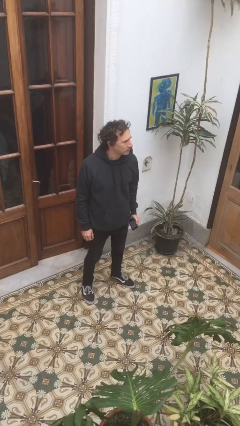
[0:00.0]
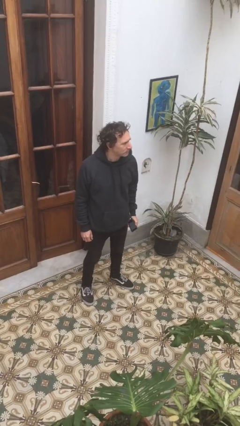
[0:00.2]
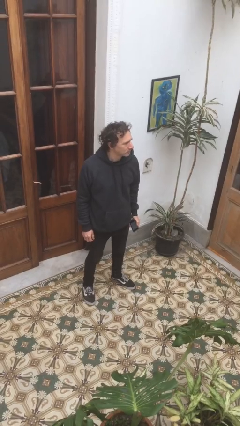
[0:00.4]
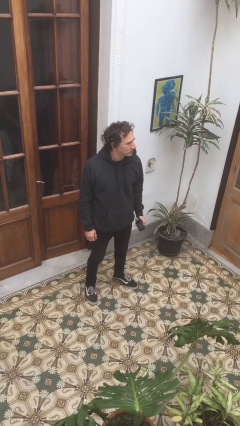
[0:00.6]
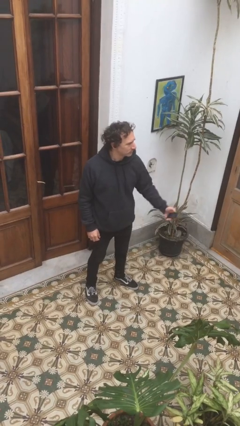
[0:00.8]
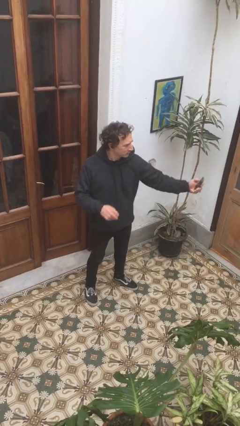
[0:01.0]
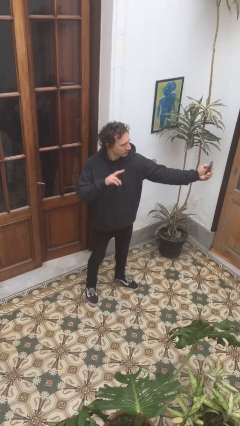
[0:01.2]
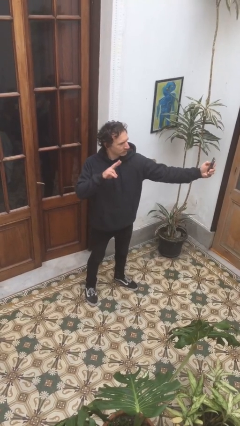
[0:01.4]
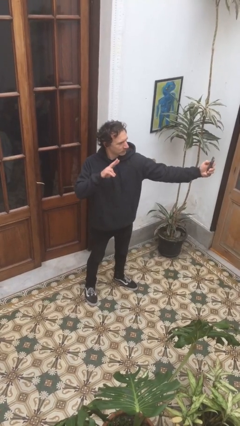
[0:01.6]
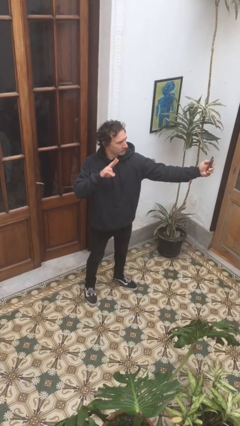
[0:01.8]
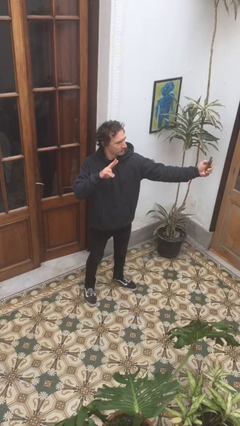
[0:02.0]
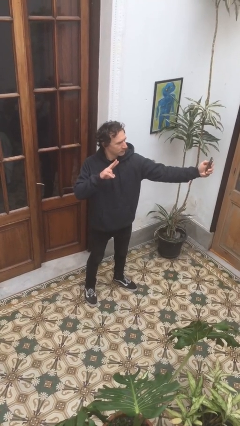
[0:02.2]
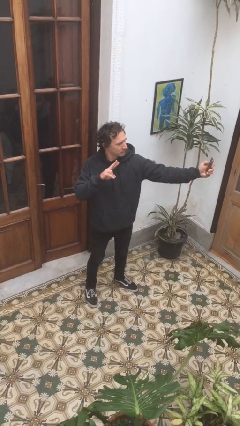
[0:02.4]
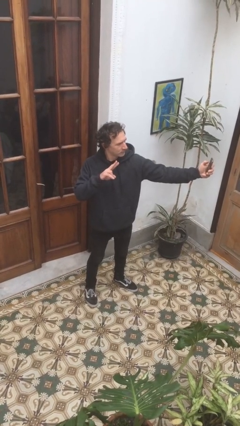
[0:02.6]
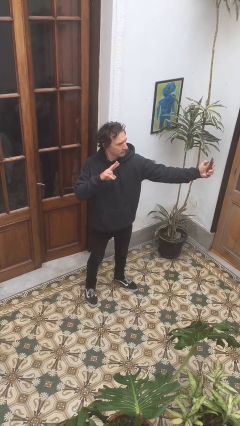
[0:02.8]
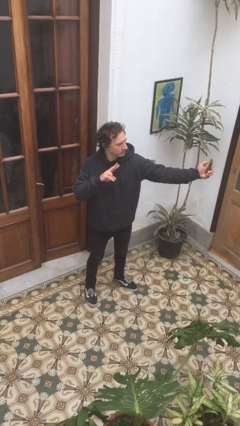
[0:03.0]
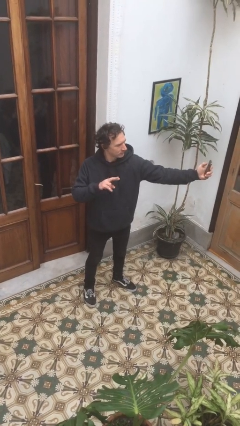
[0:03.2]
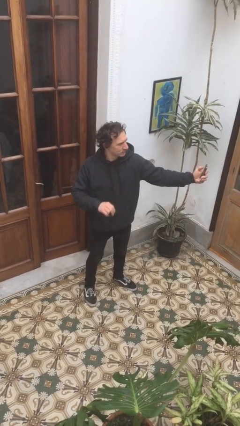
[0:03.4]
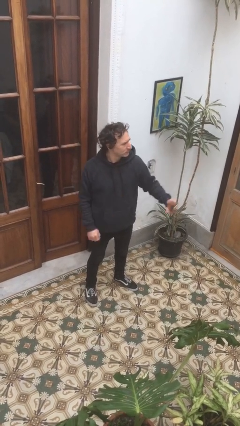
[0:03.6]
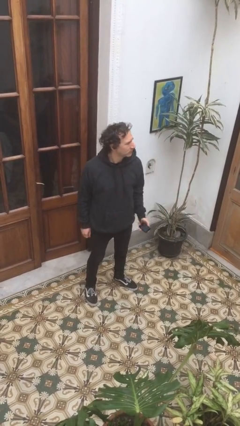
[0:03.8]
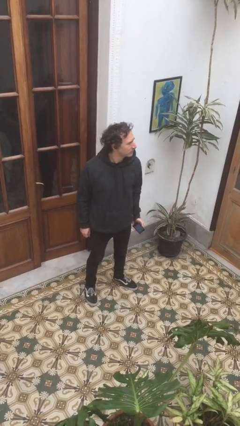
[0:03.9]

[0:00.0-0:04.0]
person takes selfie

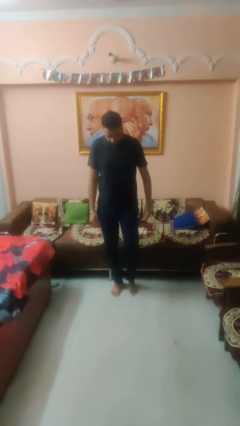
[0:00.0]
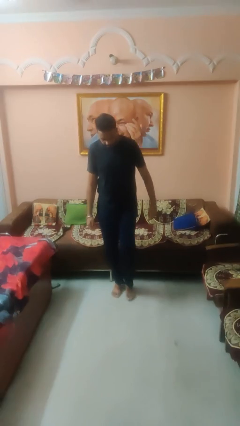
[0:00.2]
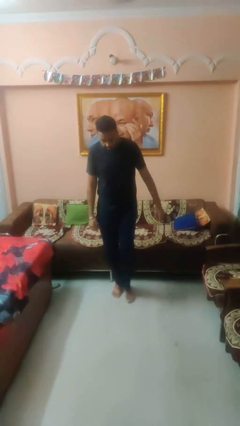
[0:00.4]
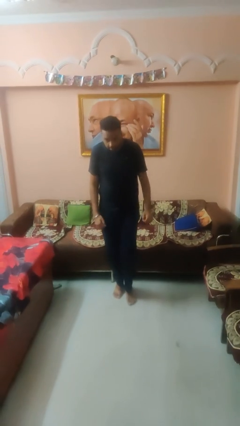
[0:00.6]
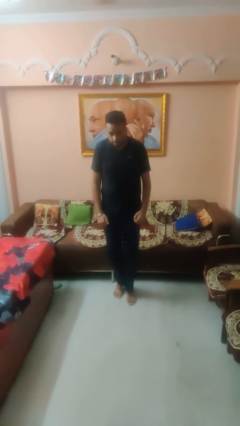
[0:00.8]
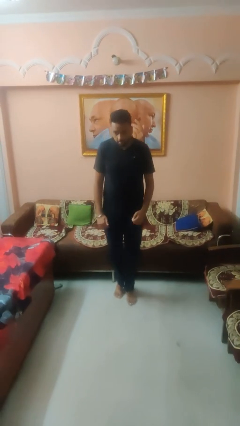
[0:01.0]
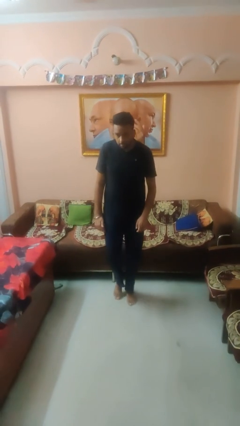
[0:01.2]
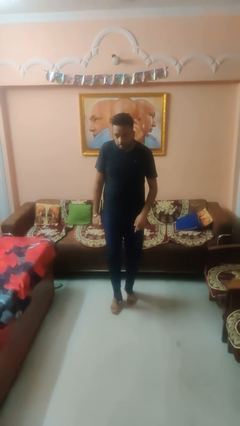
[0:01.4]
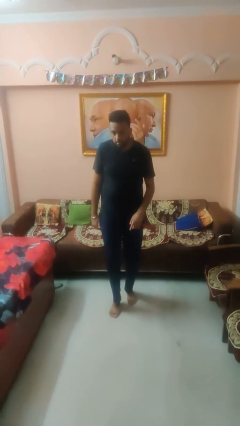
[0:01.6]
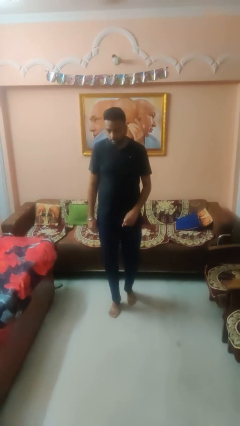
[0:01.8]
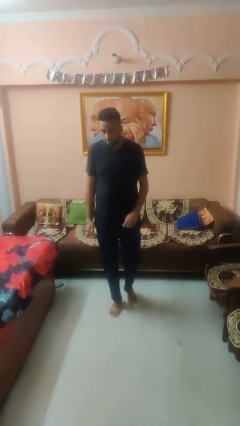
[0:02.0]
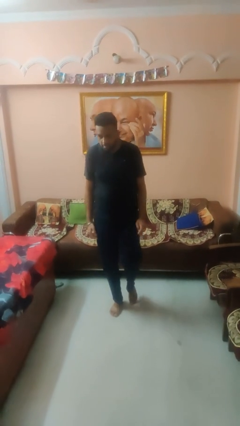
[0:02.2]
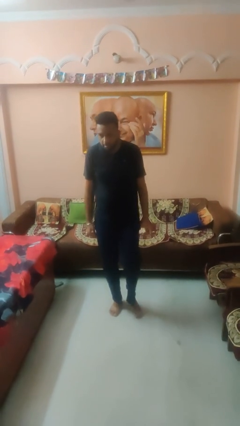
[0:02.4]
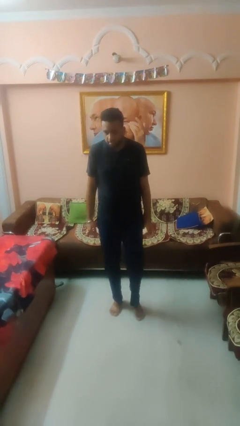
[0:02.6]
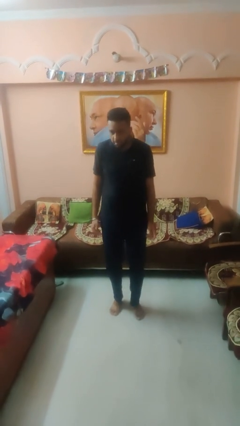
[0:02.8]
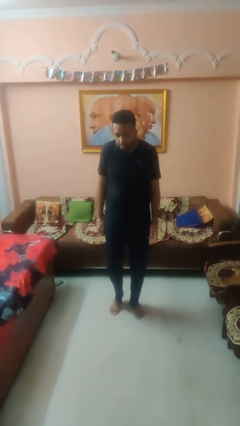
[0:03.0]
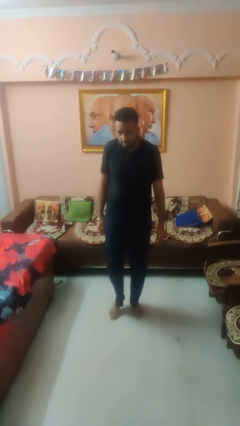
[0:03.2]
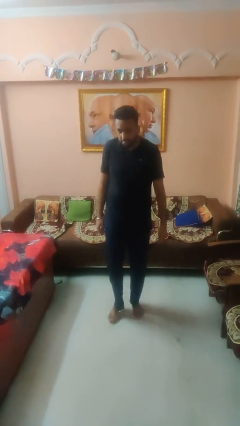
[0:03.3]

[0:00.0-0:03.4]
person walks tiptoe

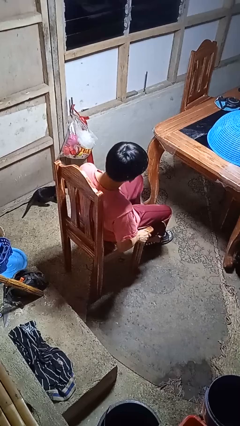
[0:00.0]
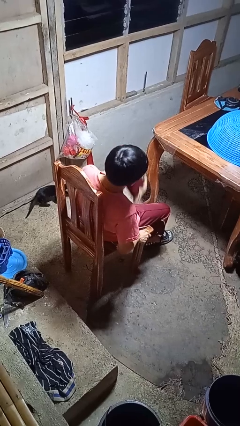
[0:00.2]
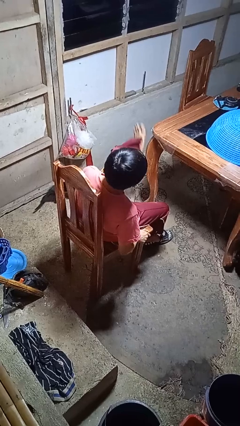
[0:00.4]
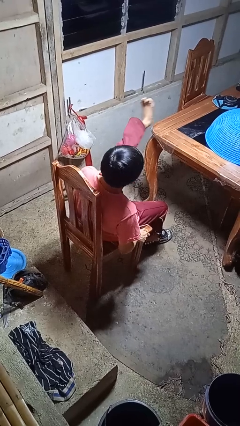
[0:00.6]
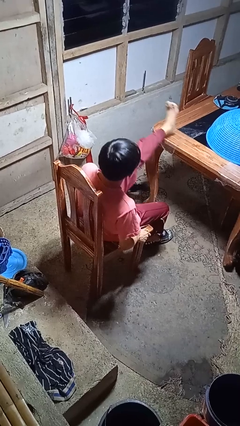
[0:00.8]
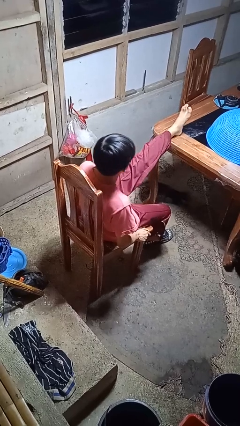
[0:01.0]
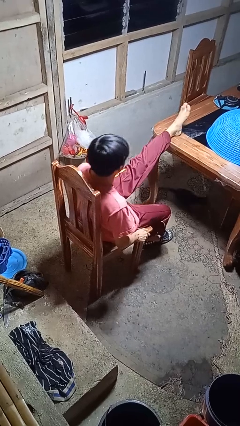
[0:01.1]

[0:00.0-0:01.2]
person puts feet up

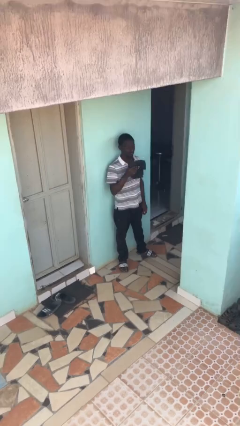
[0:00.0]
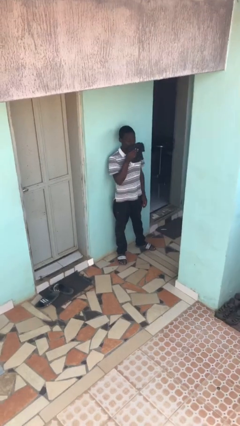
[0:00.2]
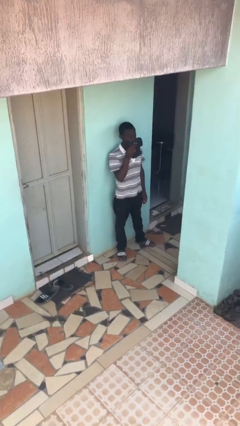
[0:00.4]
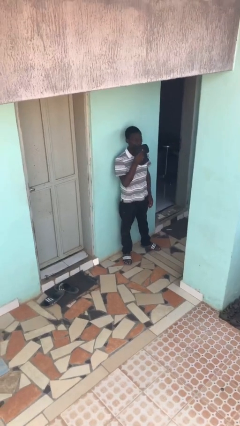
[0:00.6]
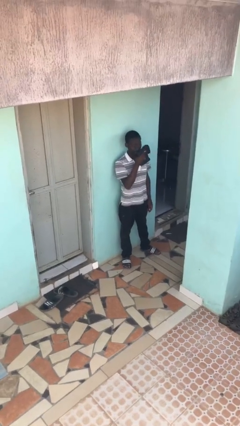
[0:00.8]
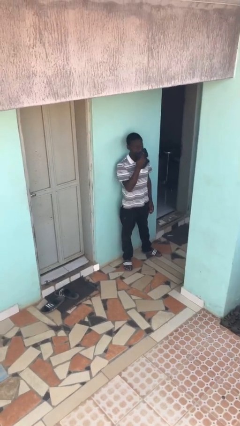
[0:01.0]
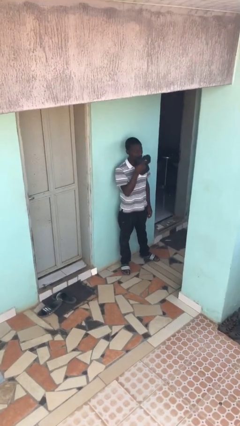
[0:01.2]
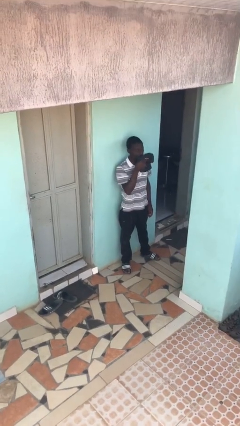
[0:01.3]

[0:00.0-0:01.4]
person wipes mouth with napkin

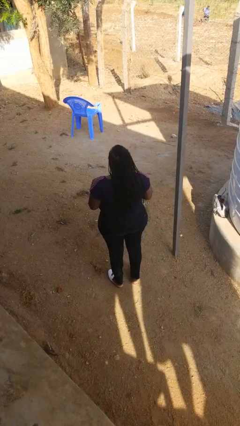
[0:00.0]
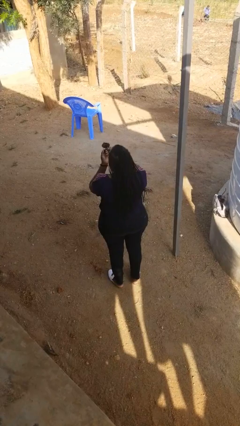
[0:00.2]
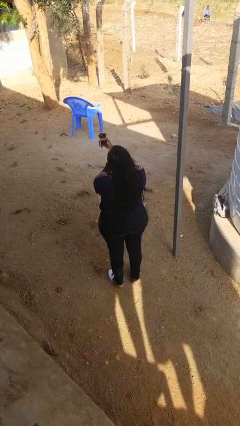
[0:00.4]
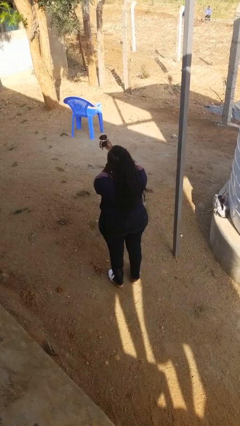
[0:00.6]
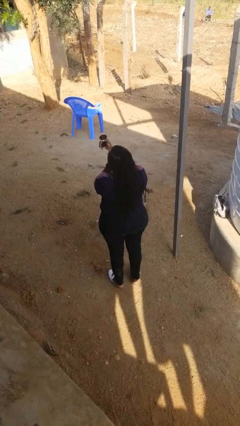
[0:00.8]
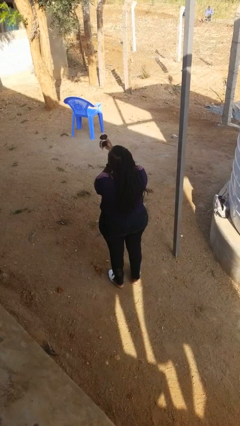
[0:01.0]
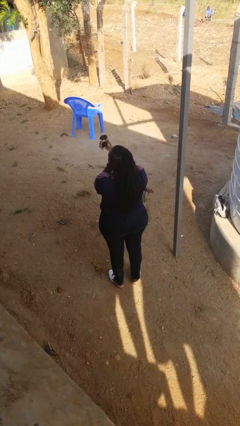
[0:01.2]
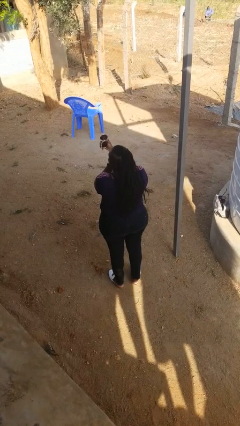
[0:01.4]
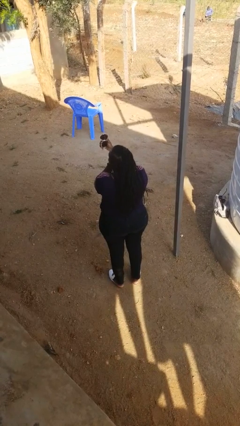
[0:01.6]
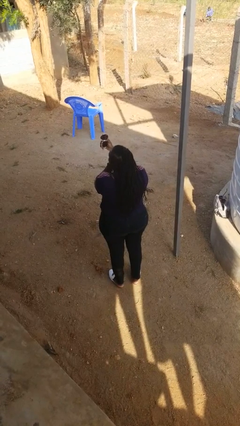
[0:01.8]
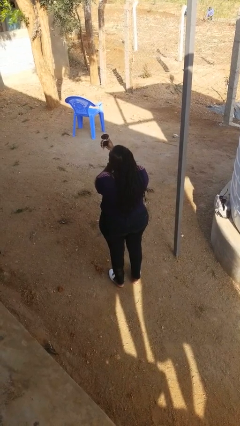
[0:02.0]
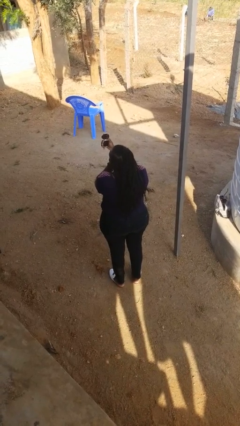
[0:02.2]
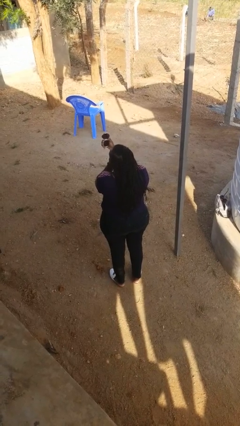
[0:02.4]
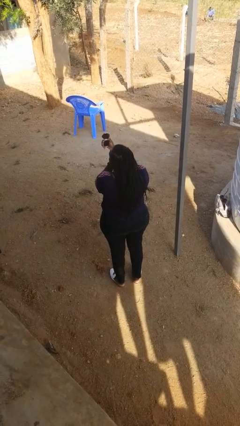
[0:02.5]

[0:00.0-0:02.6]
person applies eye makeup

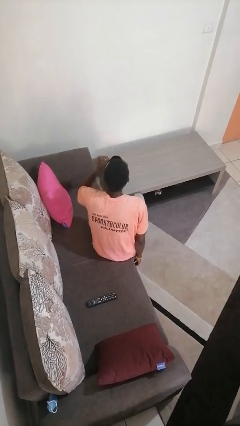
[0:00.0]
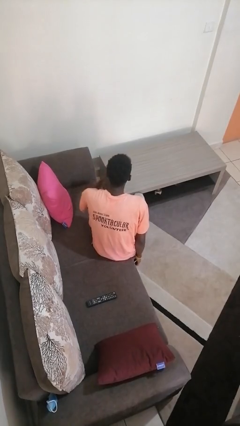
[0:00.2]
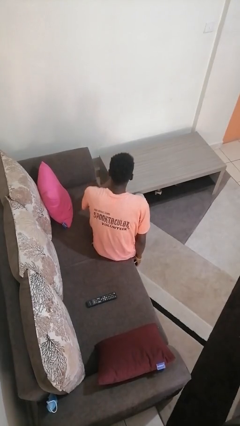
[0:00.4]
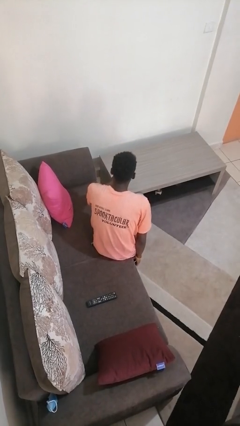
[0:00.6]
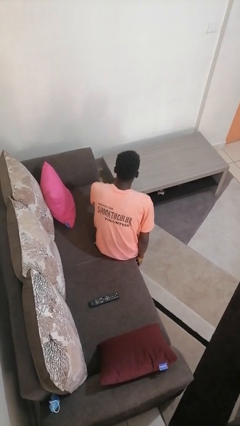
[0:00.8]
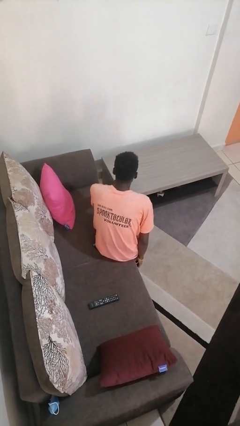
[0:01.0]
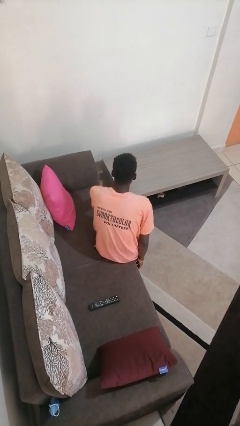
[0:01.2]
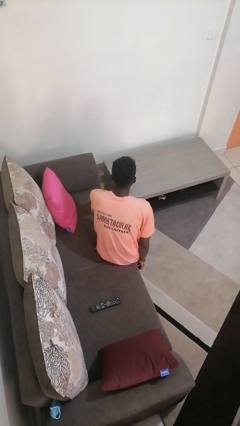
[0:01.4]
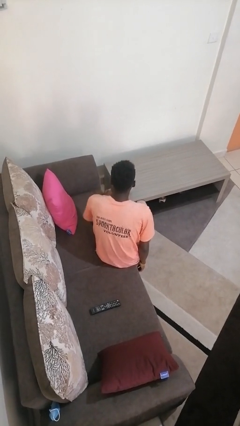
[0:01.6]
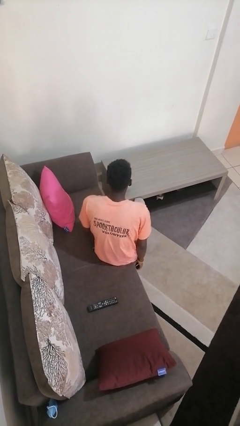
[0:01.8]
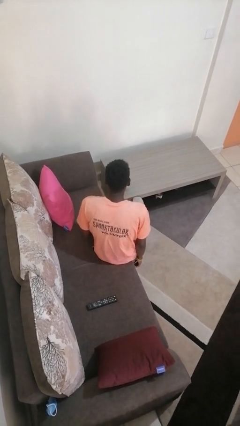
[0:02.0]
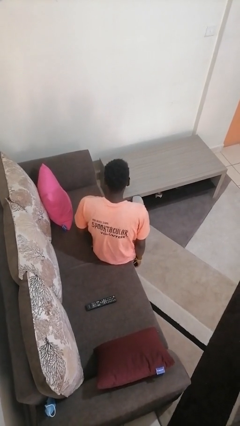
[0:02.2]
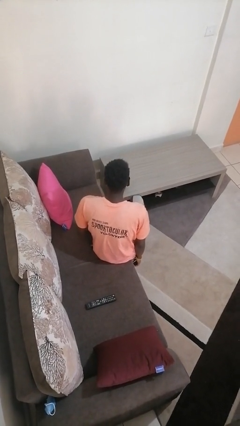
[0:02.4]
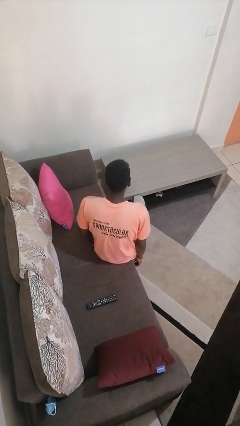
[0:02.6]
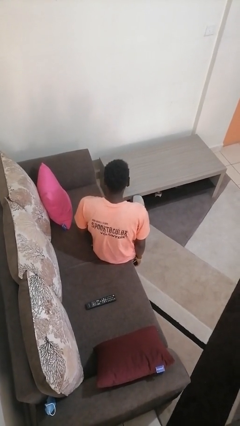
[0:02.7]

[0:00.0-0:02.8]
person puts down object on table

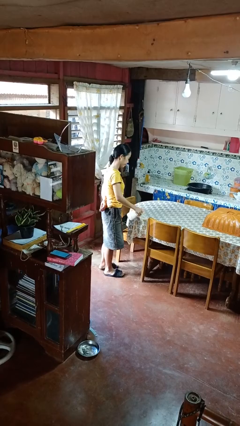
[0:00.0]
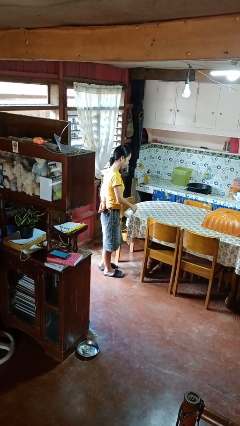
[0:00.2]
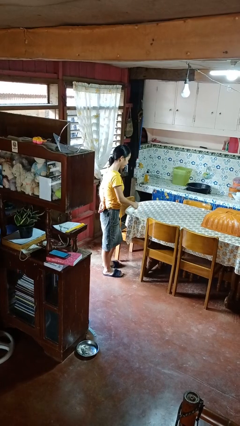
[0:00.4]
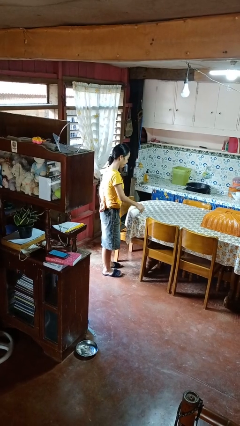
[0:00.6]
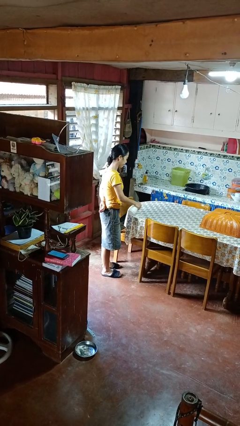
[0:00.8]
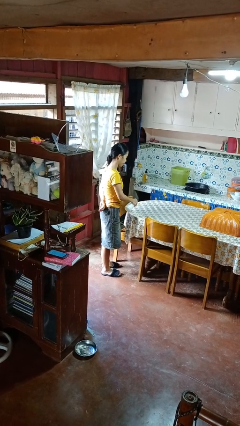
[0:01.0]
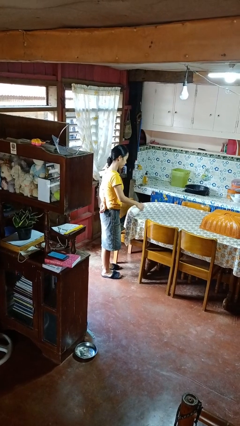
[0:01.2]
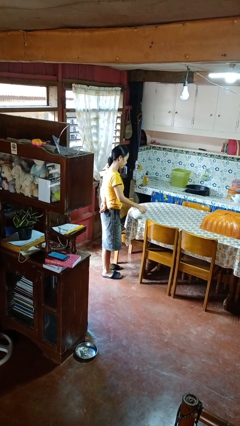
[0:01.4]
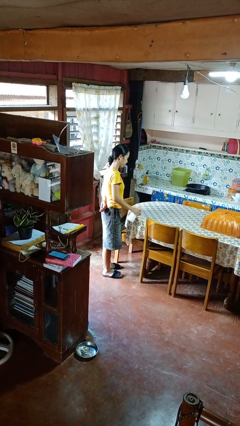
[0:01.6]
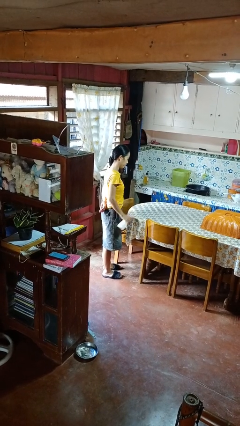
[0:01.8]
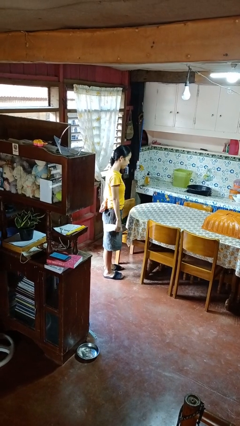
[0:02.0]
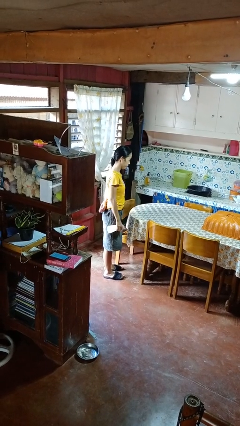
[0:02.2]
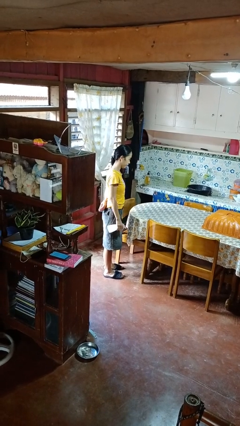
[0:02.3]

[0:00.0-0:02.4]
person sprays from bottle
